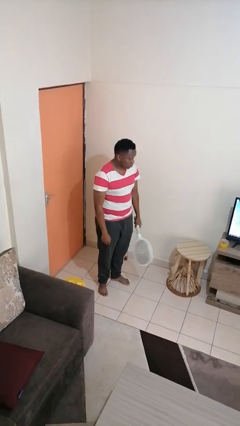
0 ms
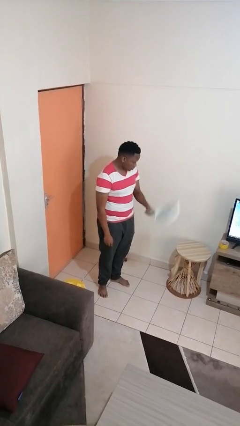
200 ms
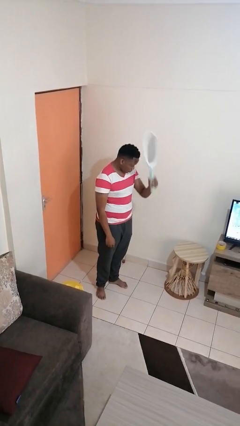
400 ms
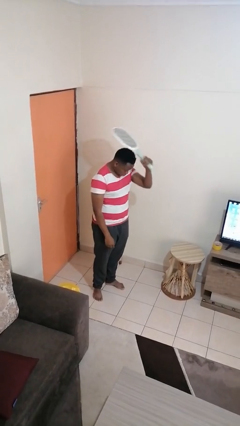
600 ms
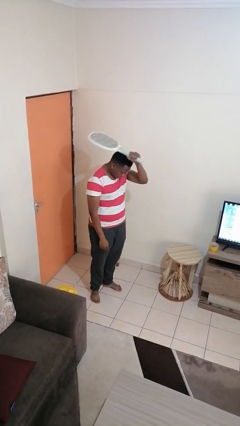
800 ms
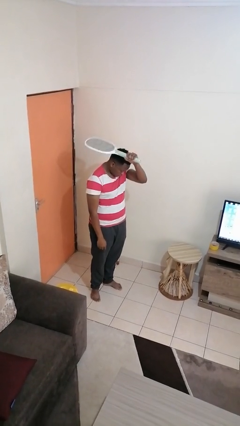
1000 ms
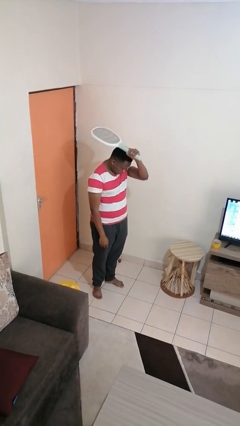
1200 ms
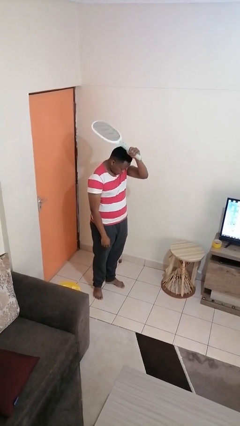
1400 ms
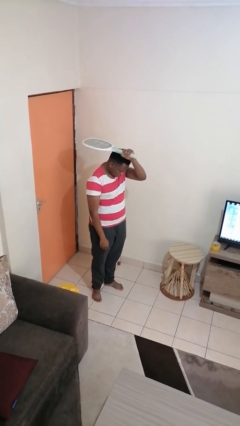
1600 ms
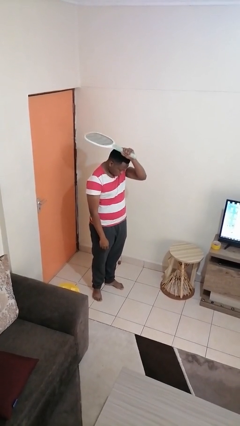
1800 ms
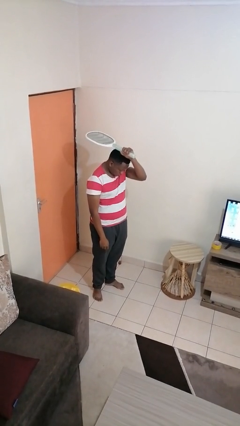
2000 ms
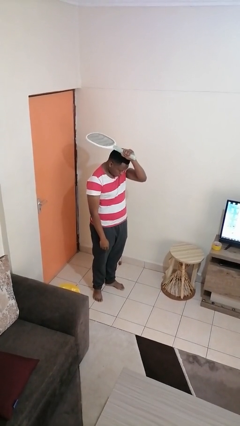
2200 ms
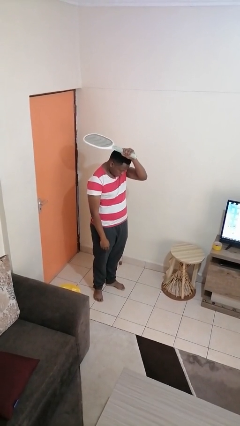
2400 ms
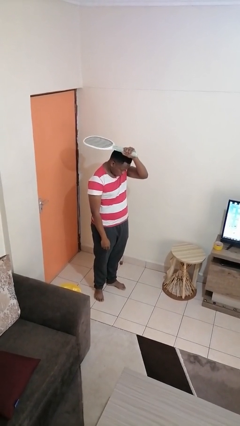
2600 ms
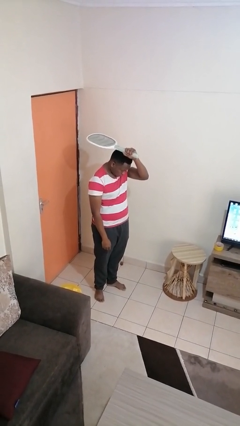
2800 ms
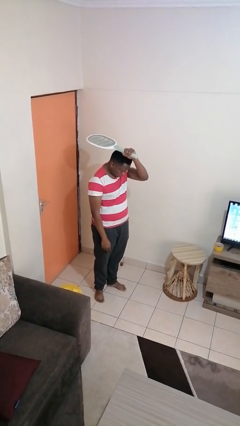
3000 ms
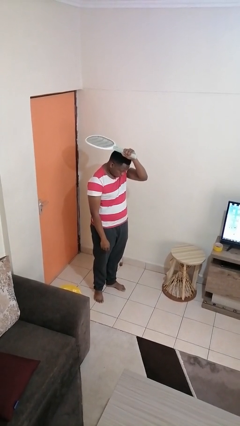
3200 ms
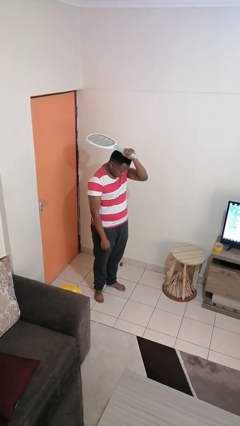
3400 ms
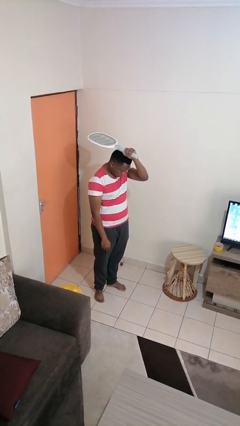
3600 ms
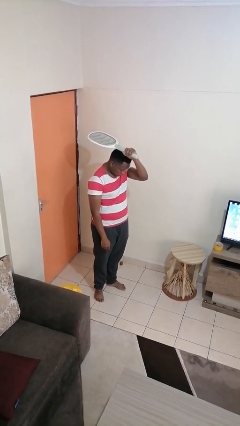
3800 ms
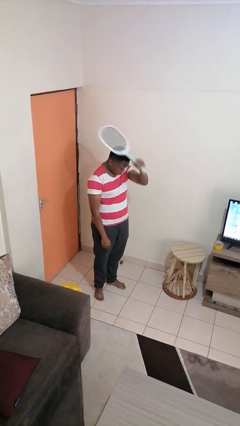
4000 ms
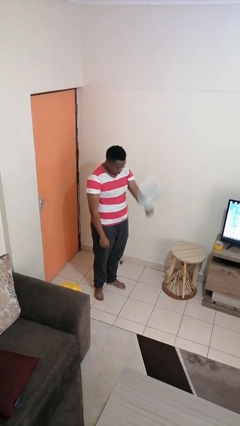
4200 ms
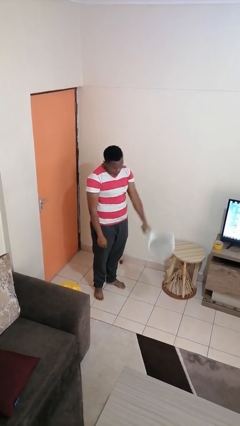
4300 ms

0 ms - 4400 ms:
person holds object above head

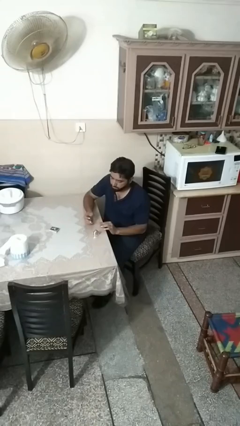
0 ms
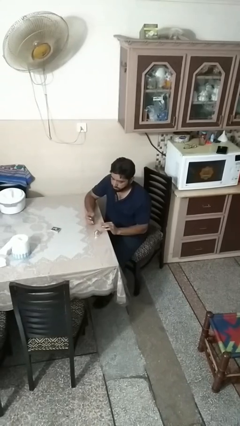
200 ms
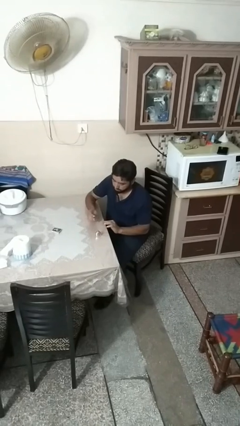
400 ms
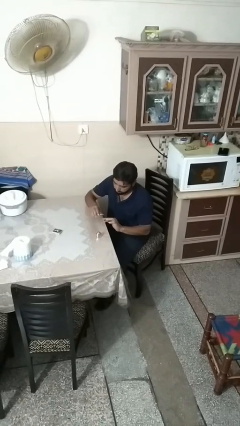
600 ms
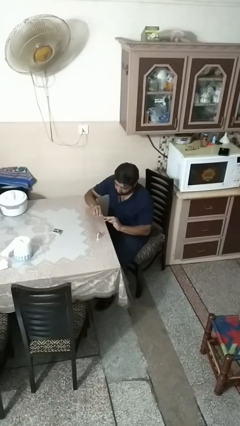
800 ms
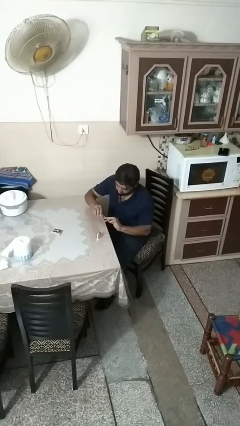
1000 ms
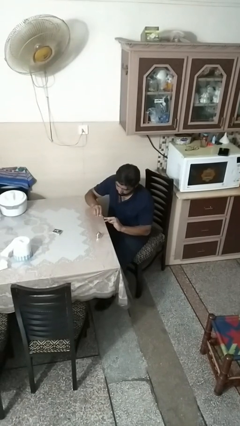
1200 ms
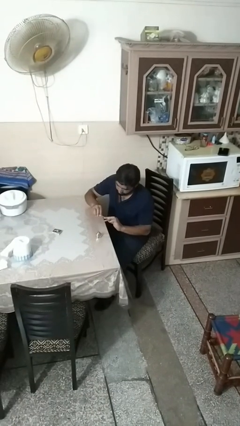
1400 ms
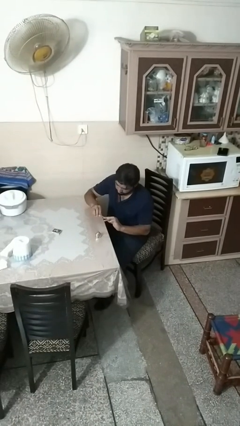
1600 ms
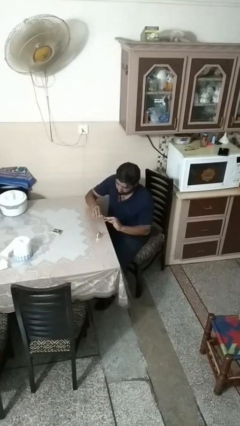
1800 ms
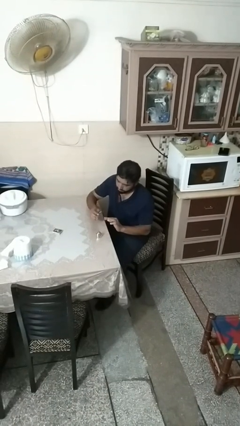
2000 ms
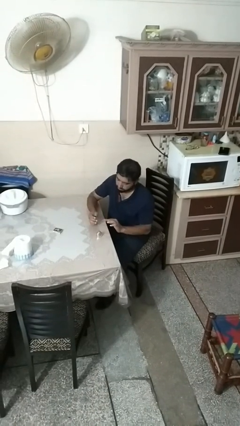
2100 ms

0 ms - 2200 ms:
person paints fingernails

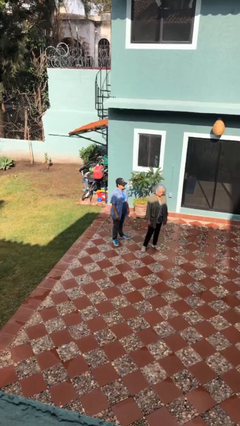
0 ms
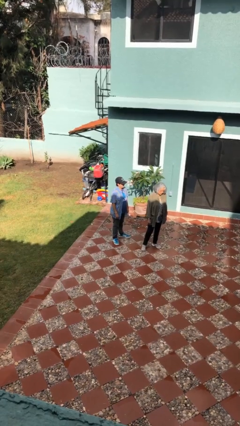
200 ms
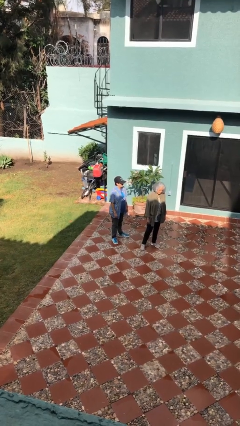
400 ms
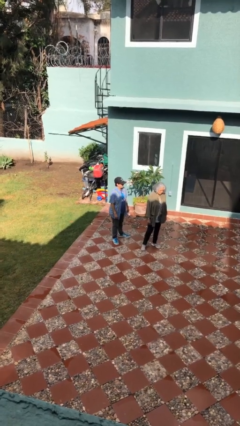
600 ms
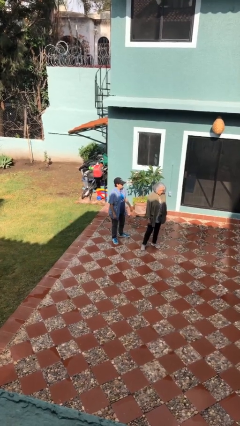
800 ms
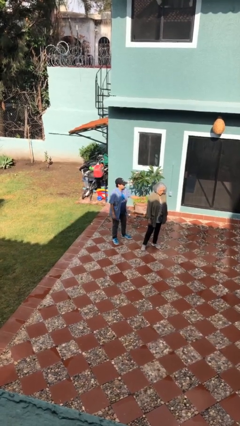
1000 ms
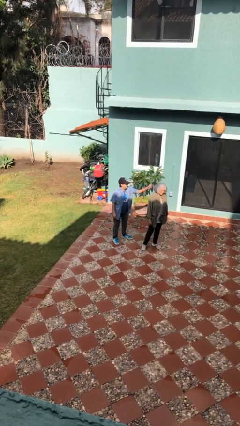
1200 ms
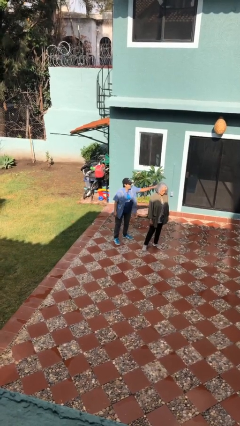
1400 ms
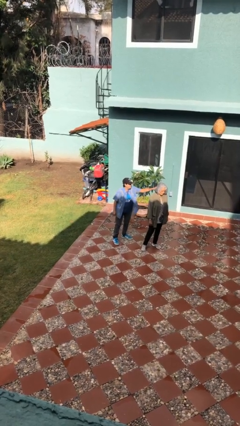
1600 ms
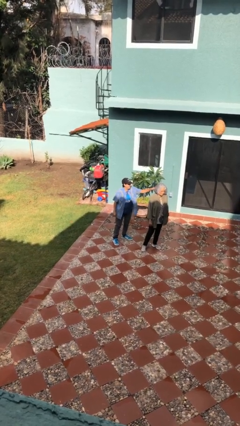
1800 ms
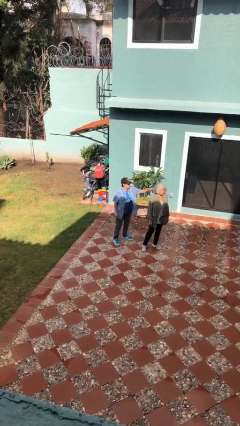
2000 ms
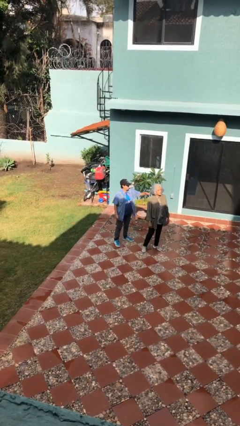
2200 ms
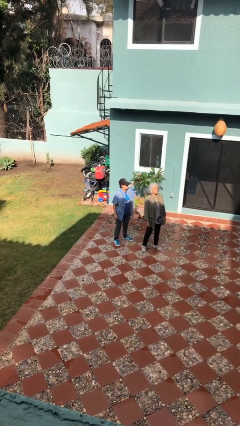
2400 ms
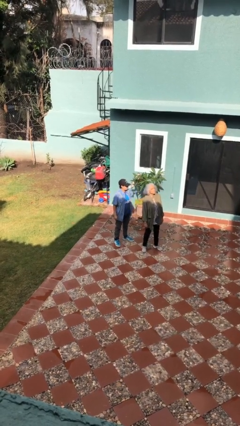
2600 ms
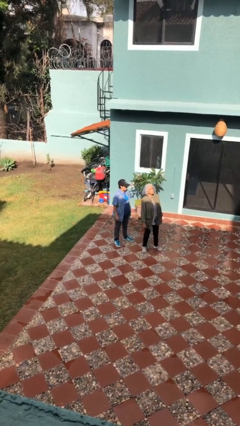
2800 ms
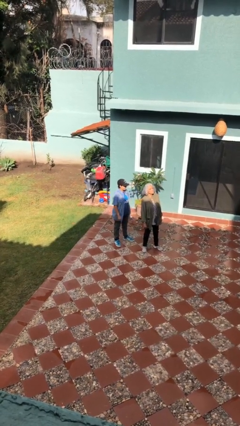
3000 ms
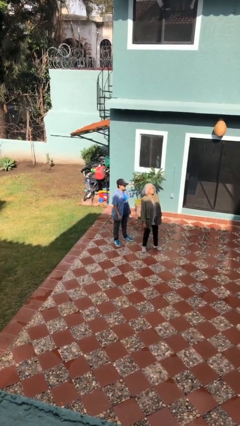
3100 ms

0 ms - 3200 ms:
person grabs person by hair

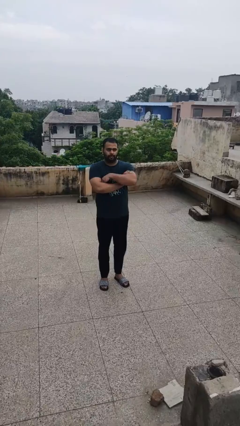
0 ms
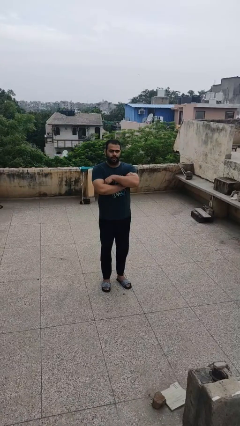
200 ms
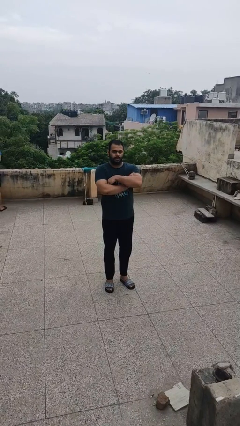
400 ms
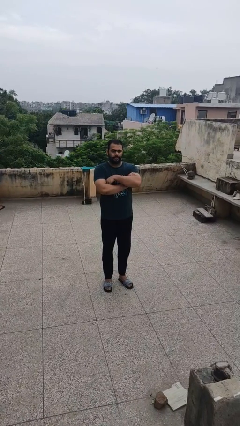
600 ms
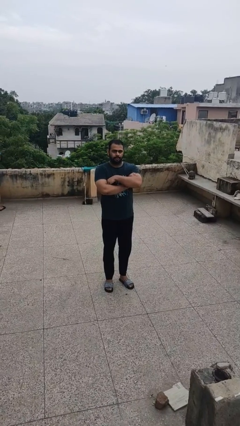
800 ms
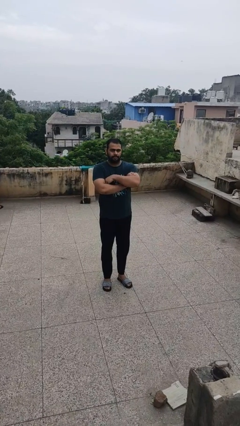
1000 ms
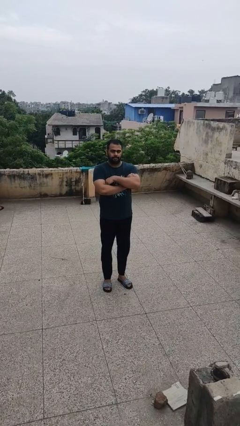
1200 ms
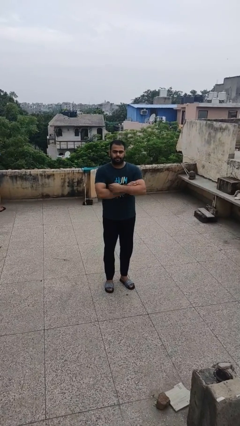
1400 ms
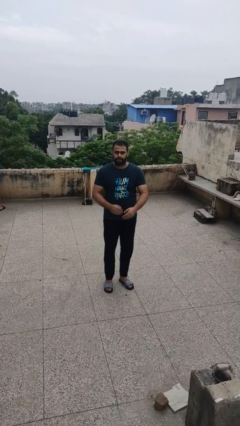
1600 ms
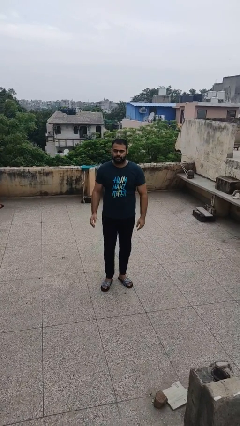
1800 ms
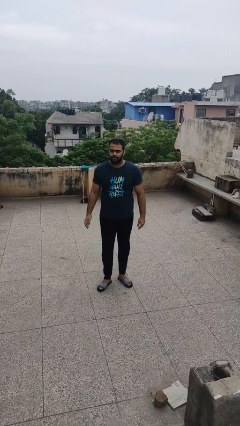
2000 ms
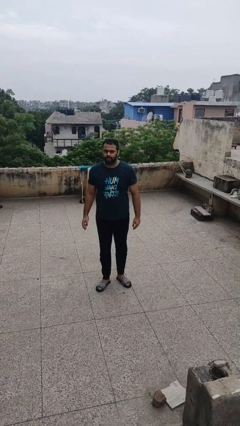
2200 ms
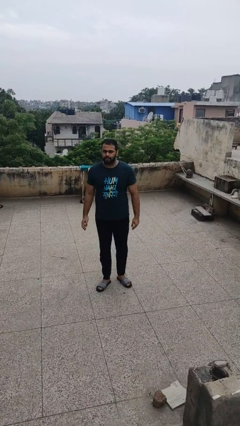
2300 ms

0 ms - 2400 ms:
person crosses arms

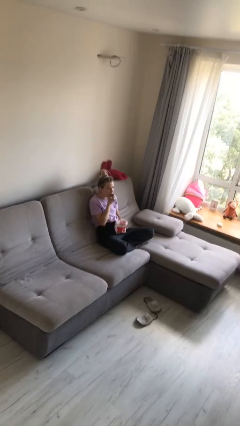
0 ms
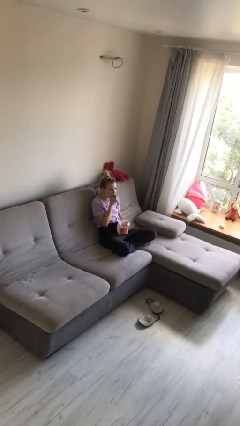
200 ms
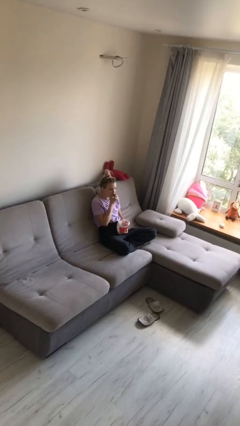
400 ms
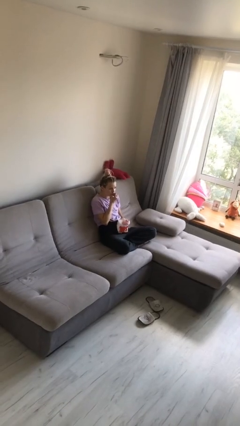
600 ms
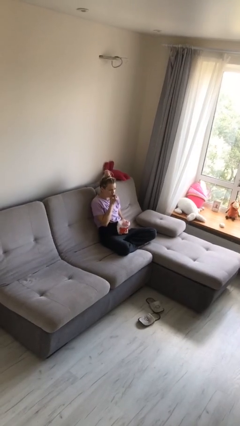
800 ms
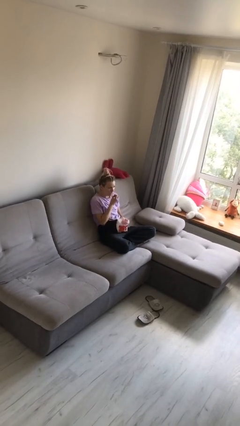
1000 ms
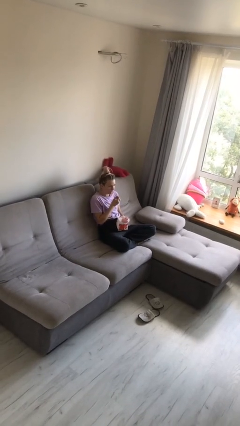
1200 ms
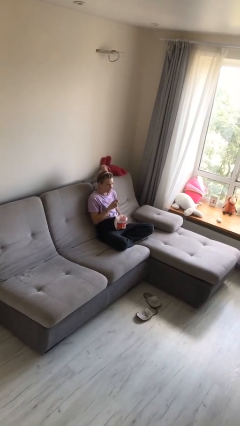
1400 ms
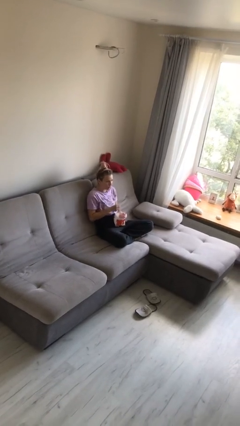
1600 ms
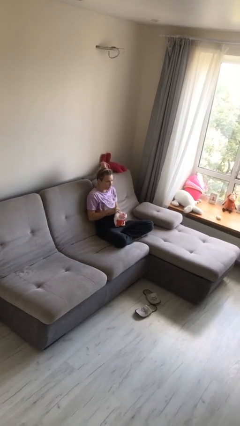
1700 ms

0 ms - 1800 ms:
person eats snack from bag

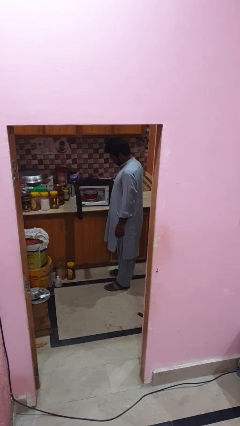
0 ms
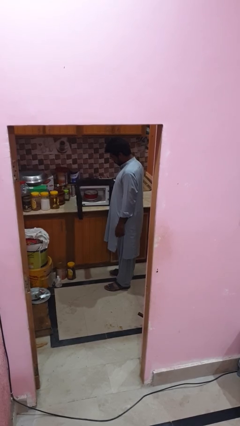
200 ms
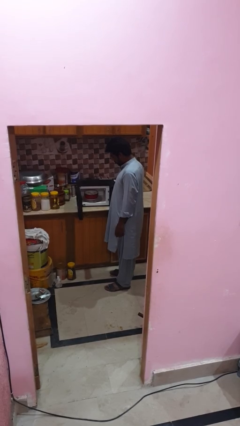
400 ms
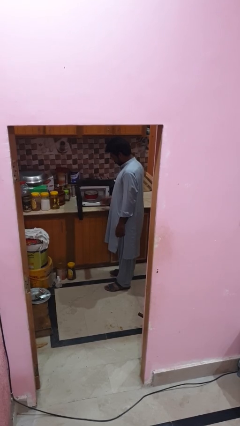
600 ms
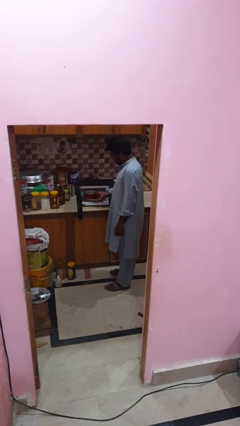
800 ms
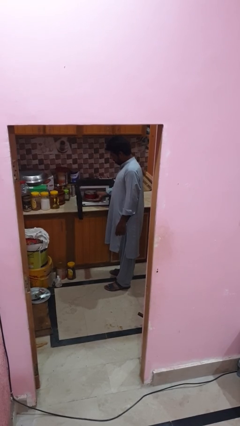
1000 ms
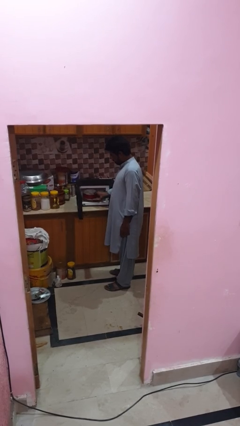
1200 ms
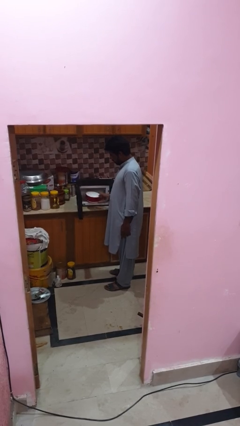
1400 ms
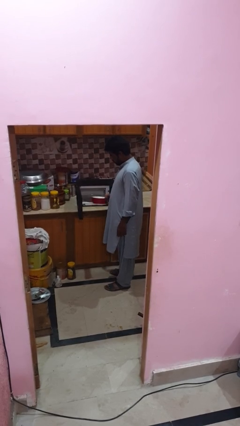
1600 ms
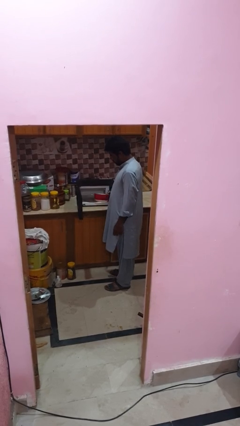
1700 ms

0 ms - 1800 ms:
person takes object from microwave

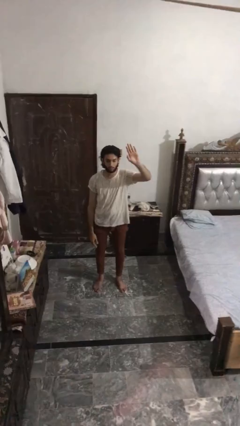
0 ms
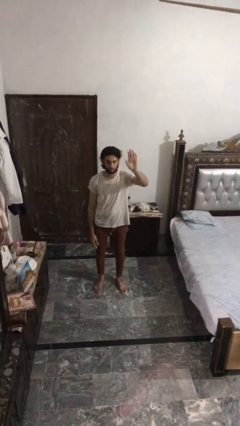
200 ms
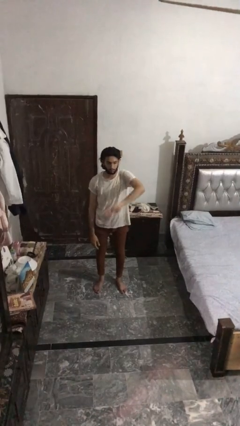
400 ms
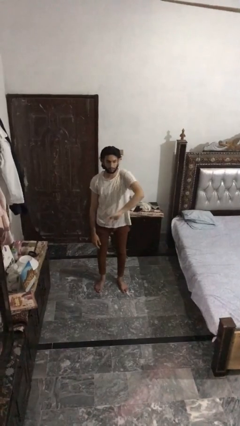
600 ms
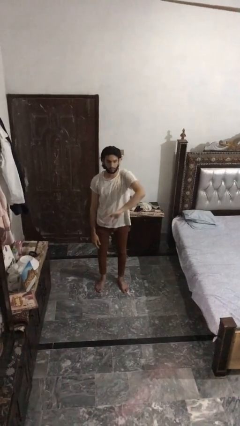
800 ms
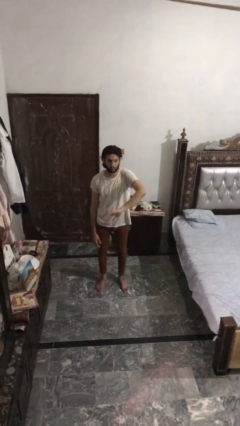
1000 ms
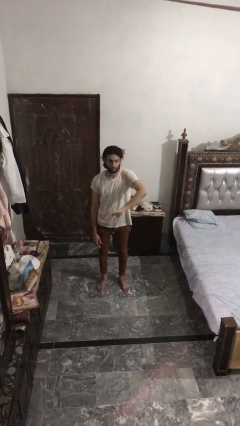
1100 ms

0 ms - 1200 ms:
person gestures swipe down
